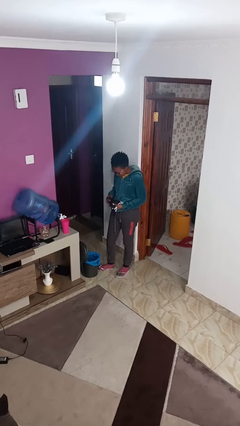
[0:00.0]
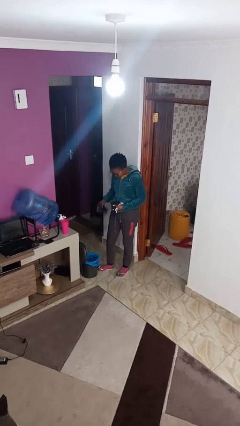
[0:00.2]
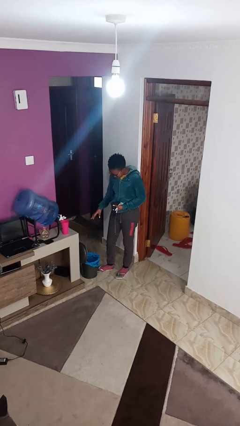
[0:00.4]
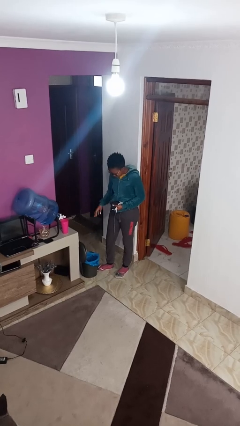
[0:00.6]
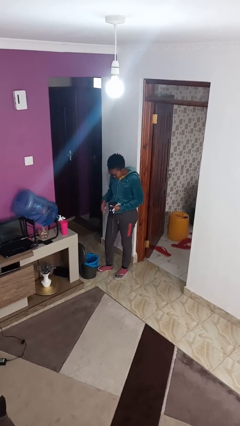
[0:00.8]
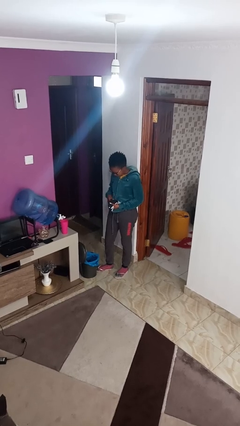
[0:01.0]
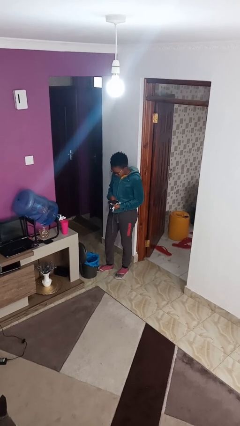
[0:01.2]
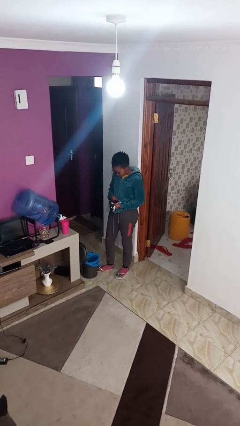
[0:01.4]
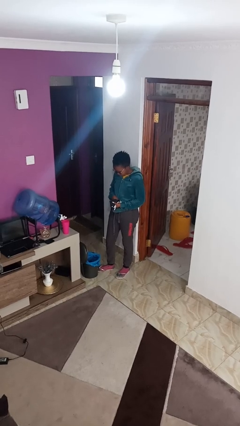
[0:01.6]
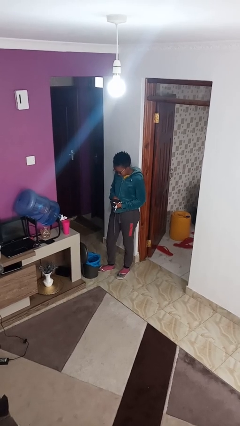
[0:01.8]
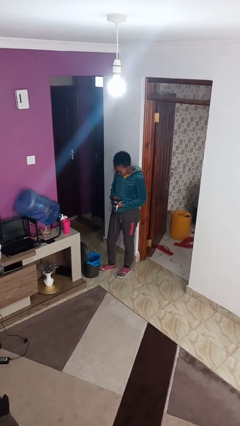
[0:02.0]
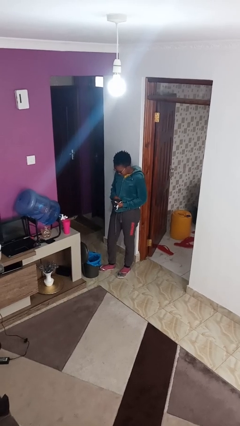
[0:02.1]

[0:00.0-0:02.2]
person discards trash

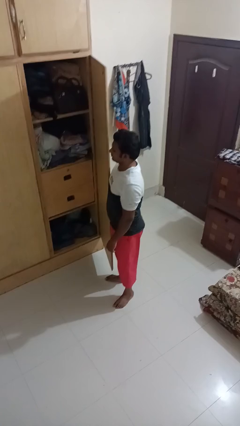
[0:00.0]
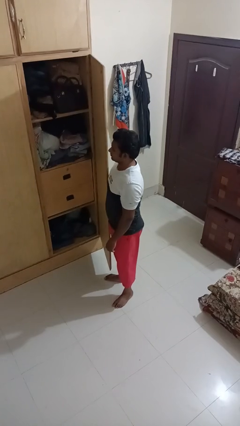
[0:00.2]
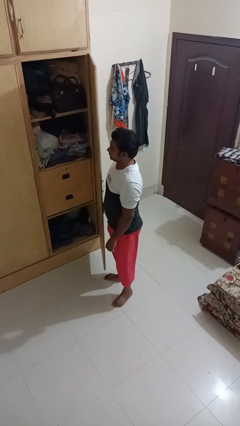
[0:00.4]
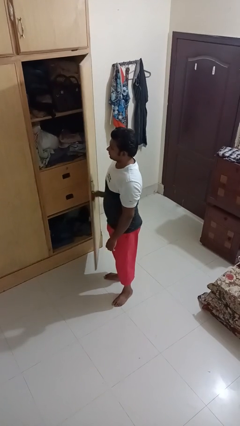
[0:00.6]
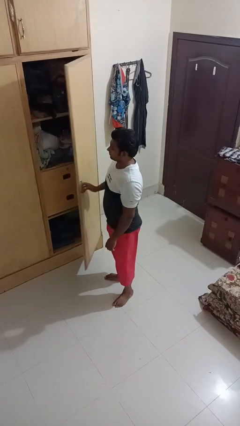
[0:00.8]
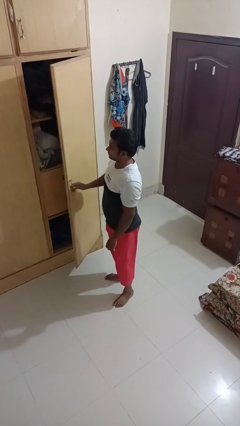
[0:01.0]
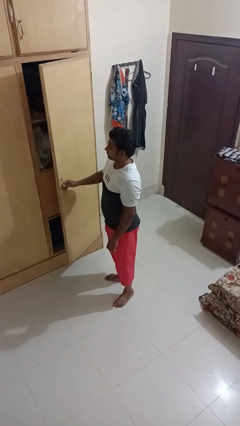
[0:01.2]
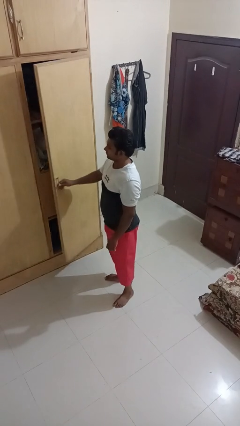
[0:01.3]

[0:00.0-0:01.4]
person closes closet door

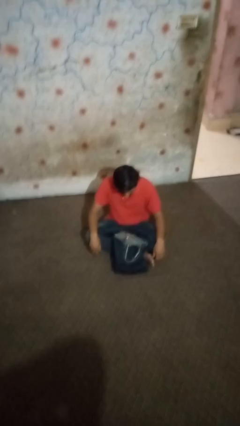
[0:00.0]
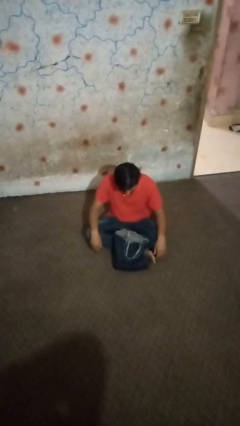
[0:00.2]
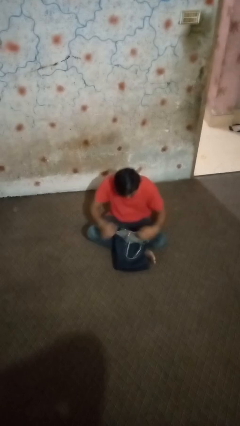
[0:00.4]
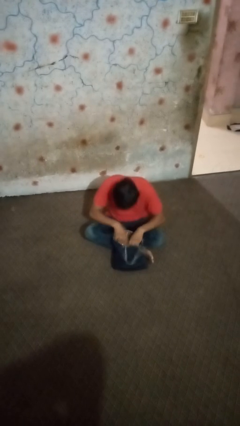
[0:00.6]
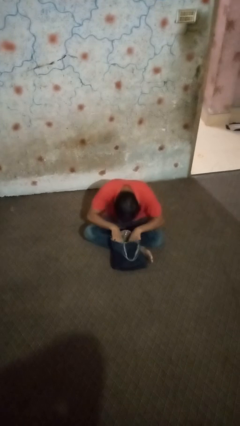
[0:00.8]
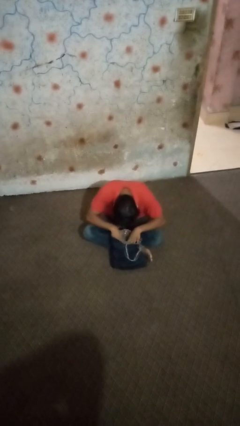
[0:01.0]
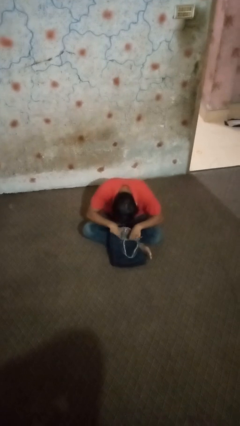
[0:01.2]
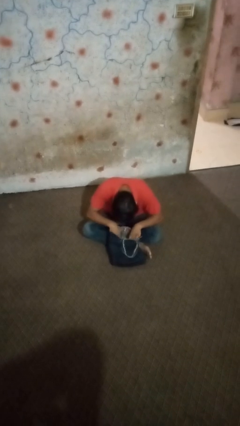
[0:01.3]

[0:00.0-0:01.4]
person searches in bag

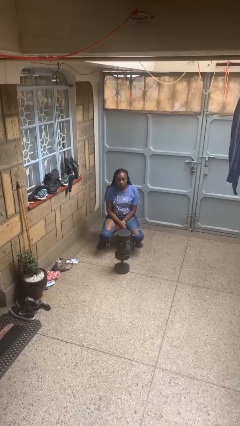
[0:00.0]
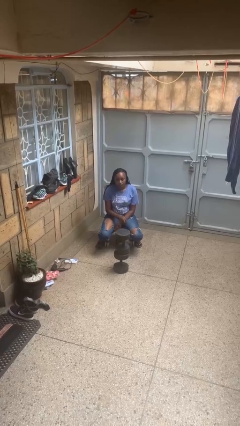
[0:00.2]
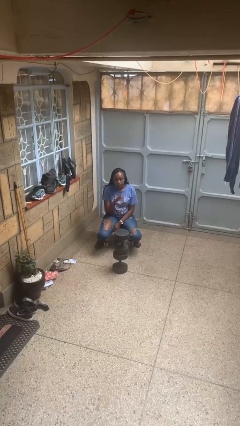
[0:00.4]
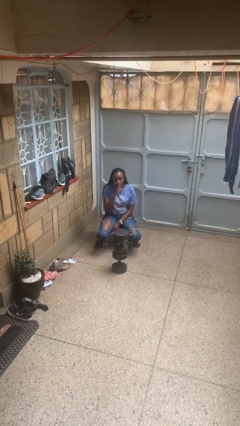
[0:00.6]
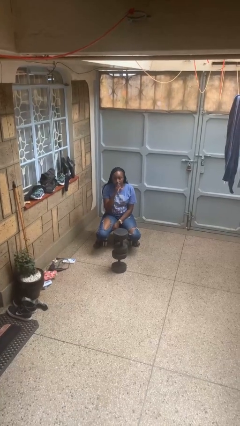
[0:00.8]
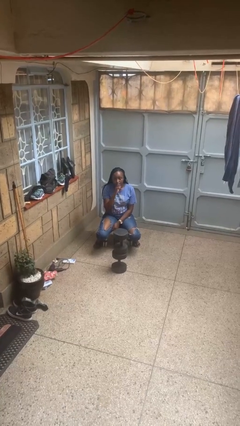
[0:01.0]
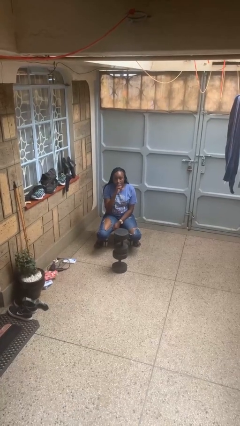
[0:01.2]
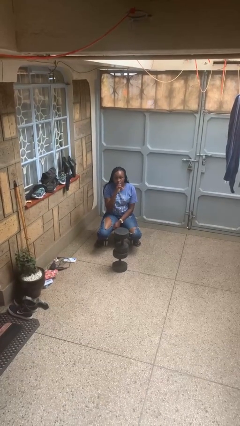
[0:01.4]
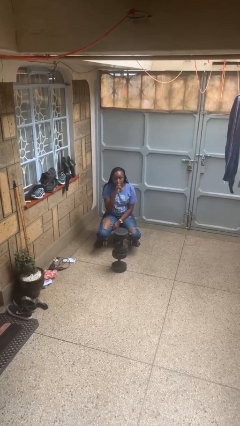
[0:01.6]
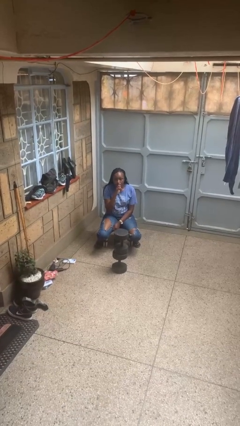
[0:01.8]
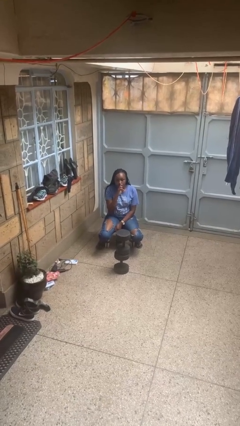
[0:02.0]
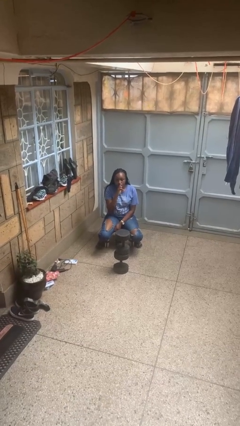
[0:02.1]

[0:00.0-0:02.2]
person gestures be quiet

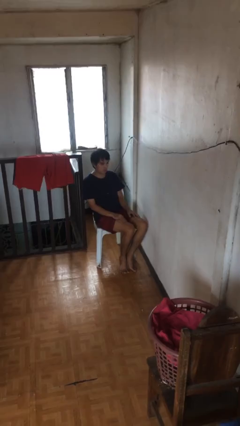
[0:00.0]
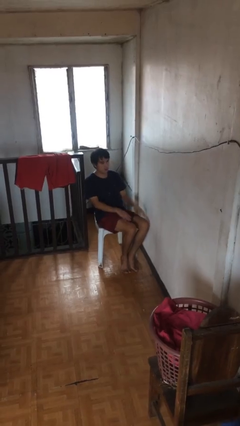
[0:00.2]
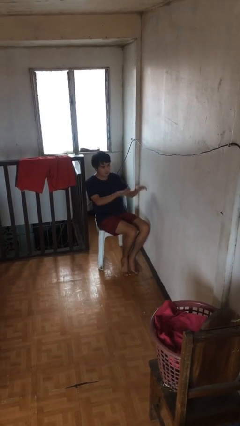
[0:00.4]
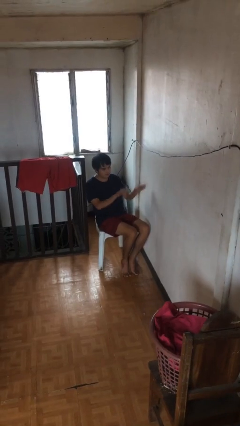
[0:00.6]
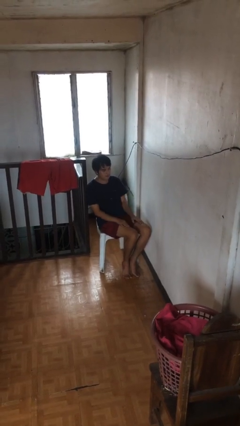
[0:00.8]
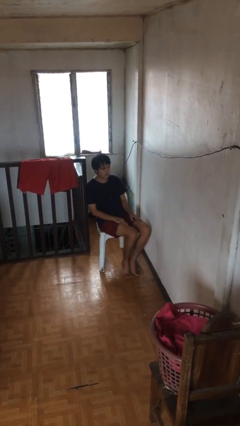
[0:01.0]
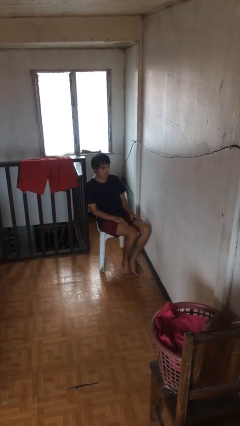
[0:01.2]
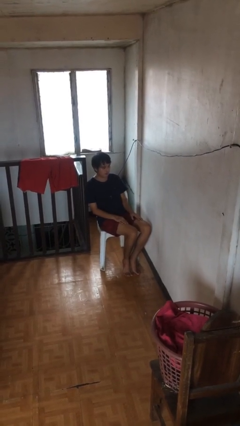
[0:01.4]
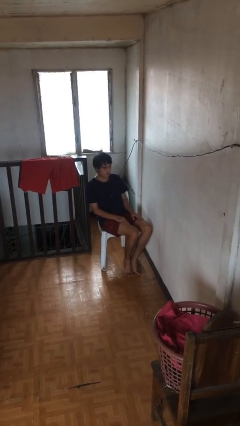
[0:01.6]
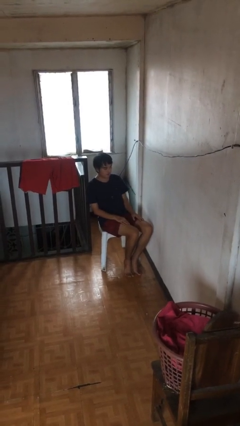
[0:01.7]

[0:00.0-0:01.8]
person slaps hands on thighs

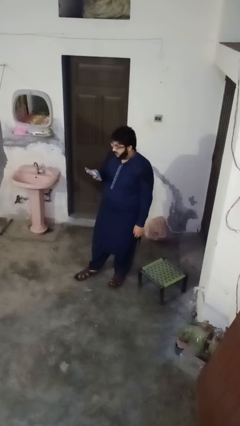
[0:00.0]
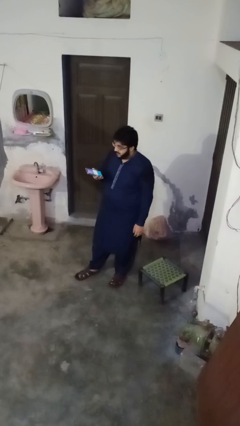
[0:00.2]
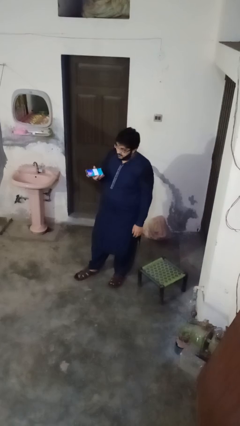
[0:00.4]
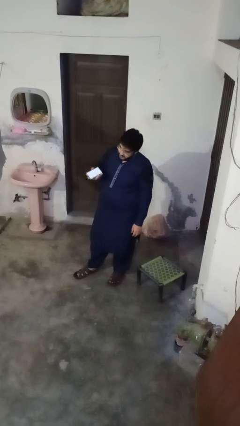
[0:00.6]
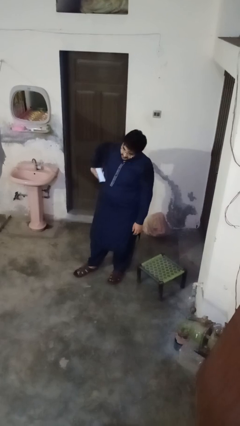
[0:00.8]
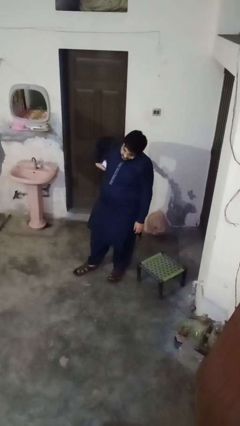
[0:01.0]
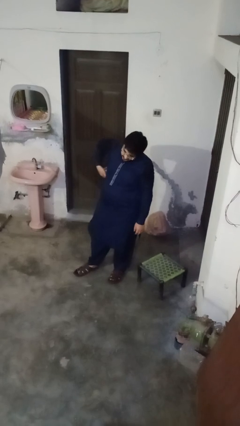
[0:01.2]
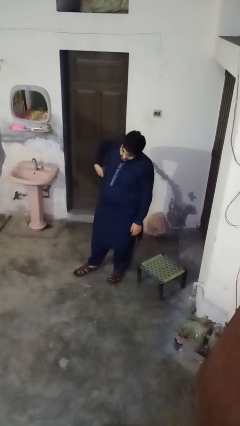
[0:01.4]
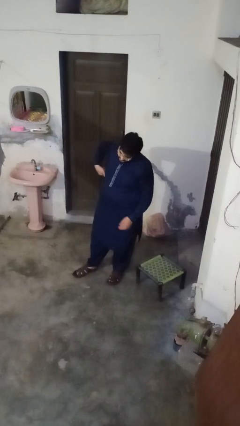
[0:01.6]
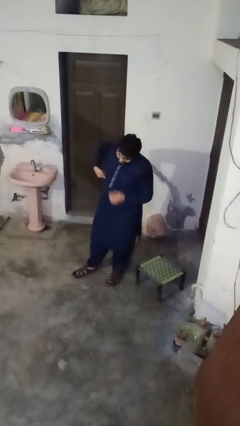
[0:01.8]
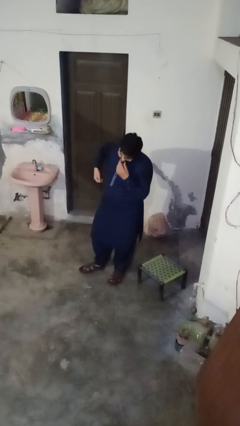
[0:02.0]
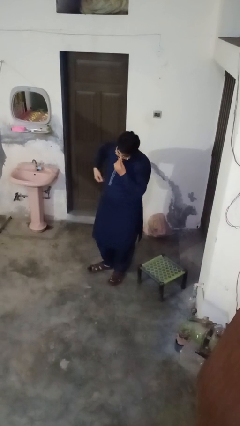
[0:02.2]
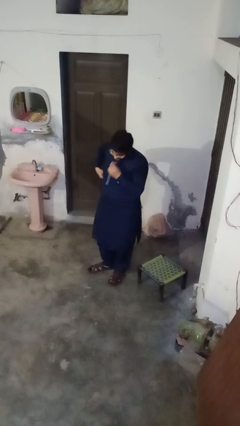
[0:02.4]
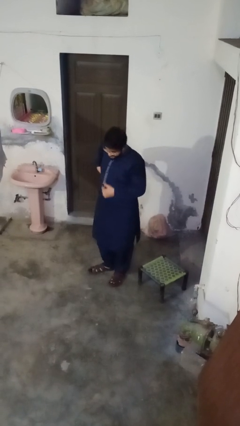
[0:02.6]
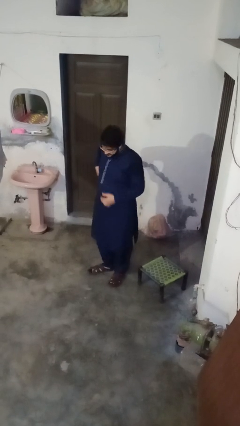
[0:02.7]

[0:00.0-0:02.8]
person puts phone into pocket

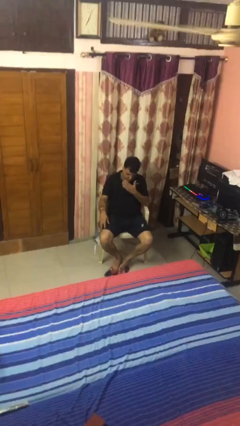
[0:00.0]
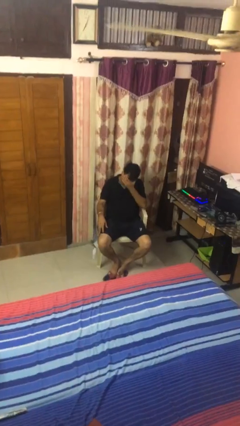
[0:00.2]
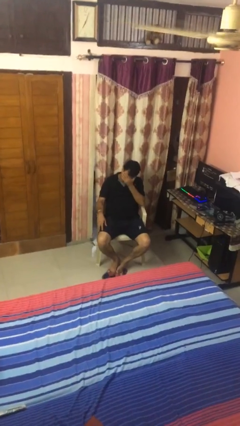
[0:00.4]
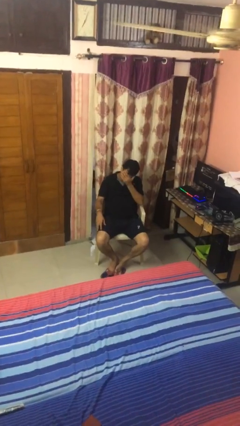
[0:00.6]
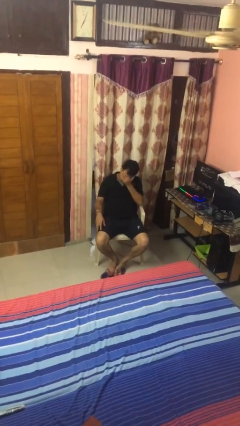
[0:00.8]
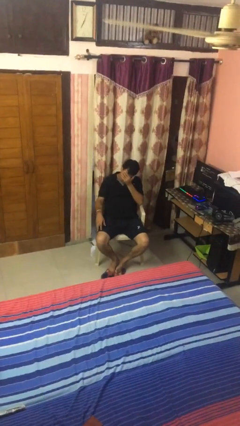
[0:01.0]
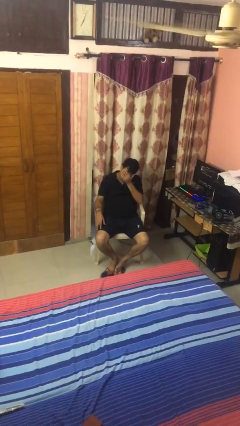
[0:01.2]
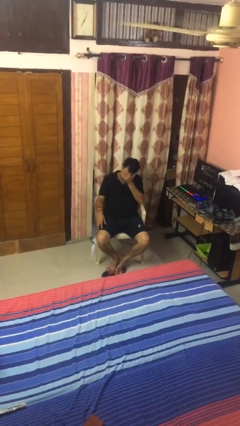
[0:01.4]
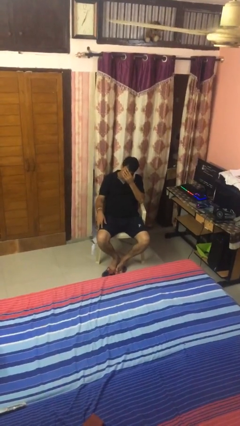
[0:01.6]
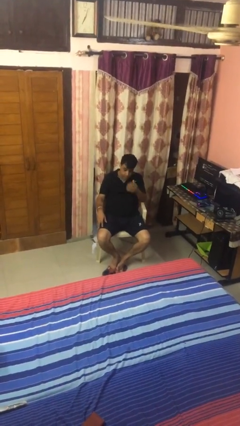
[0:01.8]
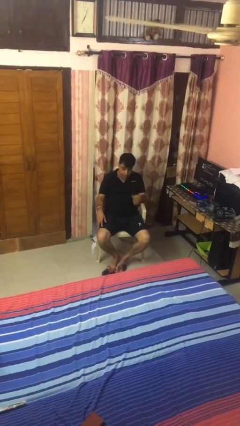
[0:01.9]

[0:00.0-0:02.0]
person covers face with hands

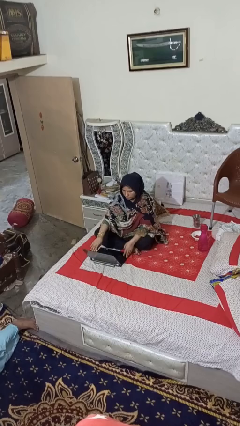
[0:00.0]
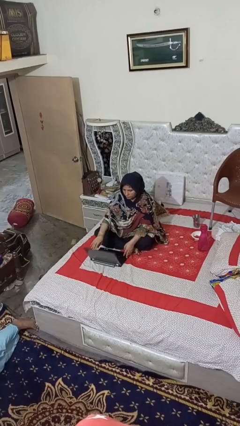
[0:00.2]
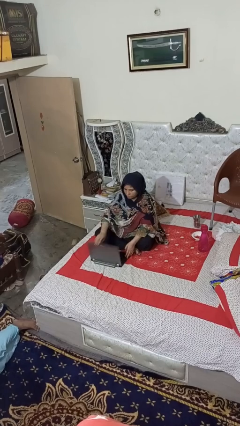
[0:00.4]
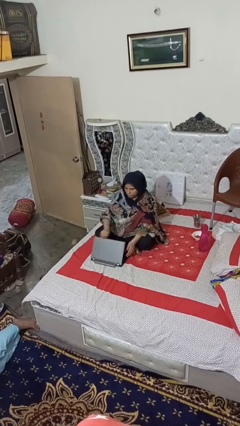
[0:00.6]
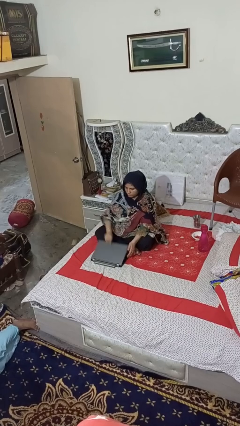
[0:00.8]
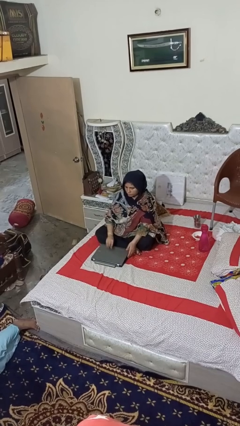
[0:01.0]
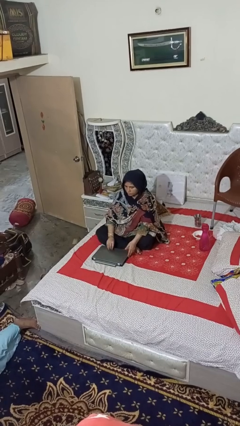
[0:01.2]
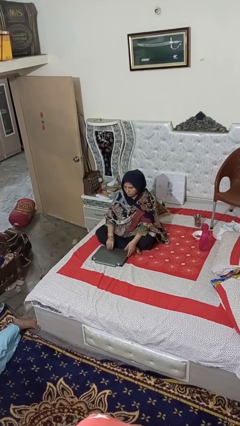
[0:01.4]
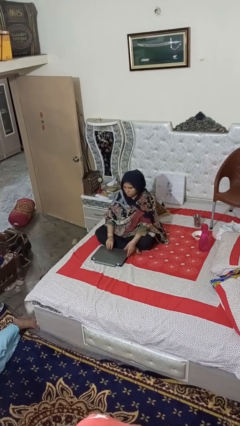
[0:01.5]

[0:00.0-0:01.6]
person closes laptop

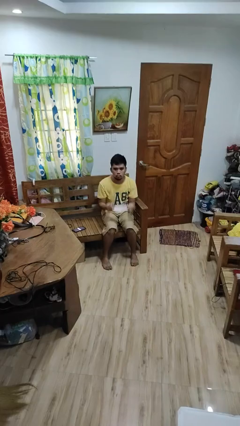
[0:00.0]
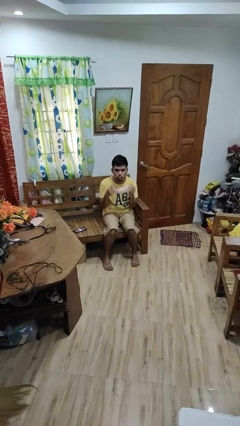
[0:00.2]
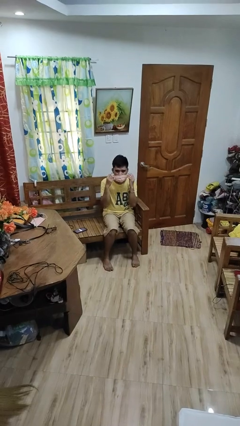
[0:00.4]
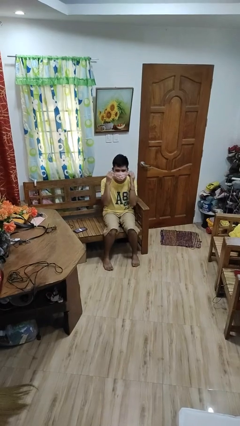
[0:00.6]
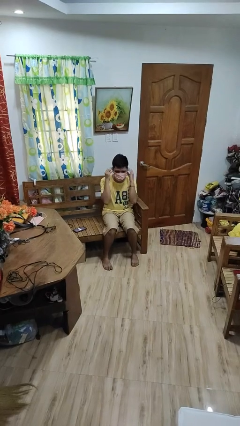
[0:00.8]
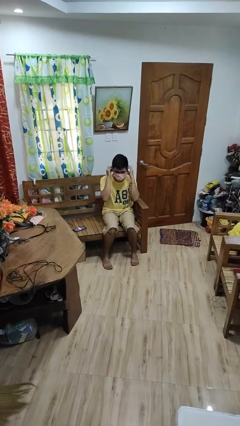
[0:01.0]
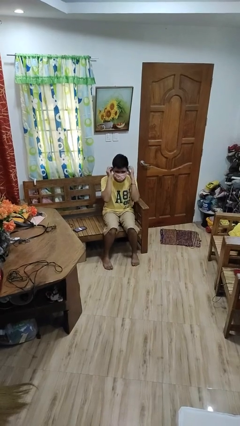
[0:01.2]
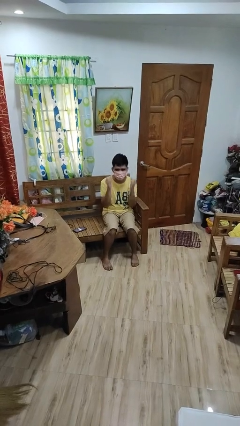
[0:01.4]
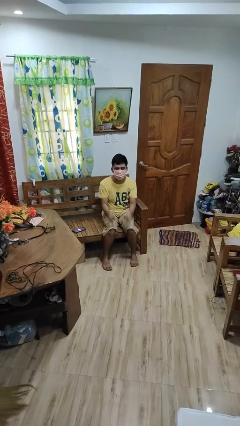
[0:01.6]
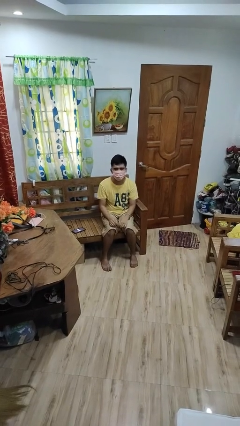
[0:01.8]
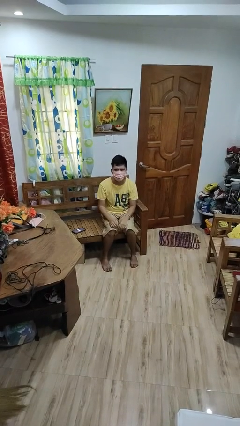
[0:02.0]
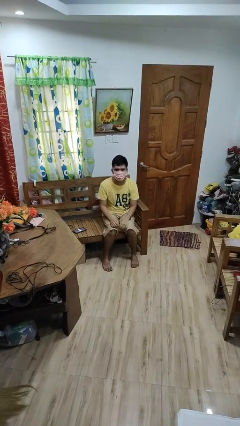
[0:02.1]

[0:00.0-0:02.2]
person puts on facemask
